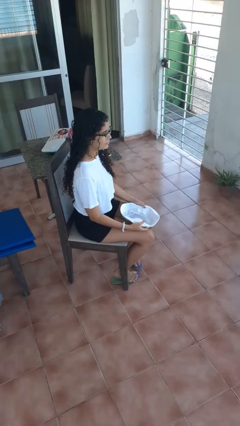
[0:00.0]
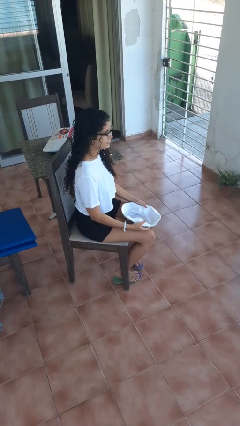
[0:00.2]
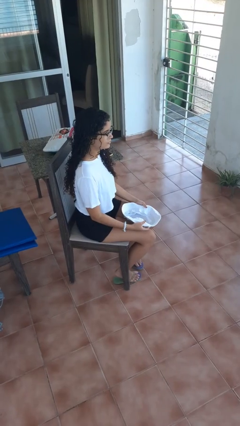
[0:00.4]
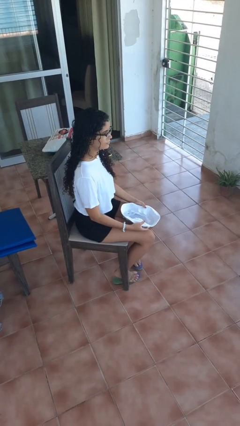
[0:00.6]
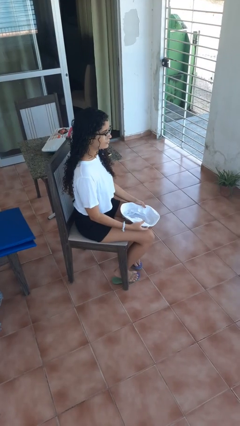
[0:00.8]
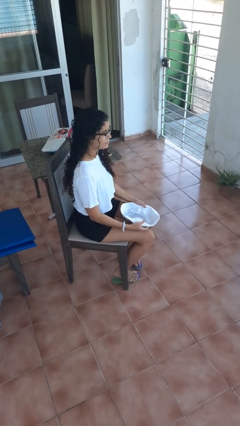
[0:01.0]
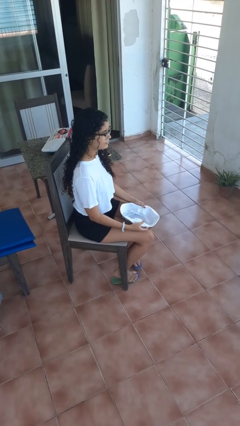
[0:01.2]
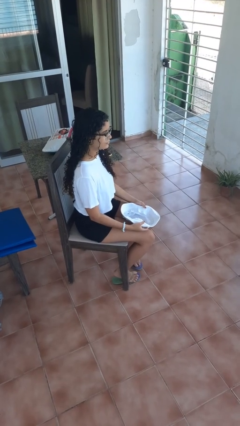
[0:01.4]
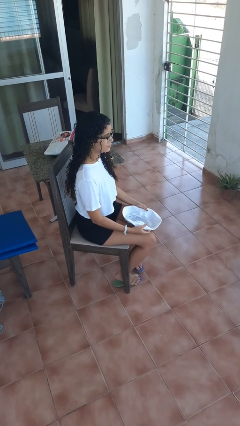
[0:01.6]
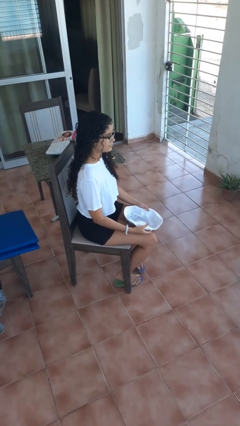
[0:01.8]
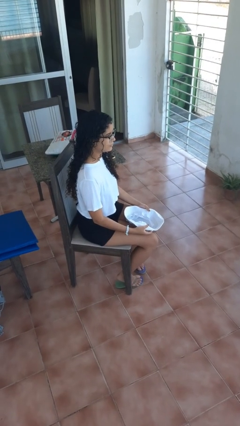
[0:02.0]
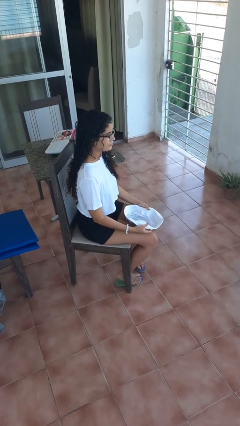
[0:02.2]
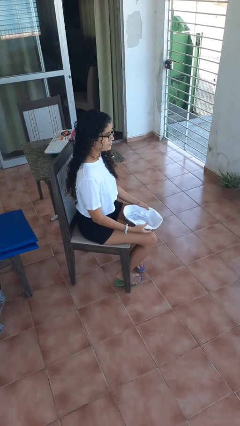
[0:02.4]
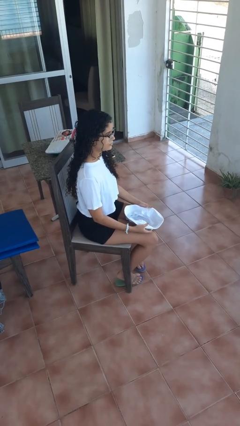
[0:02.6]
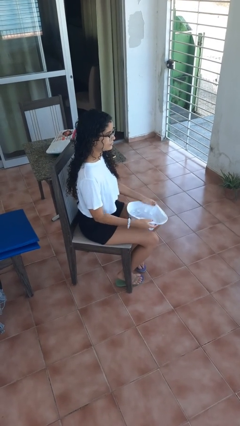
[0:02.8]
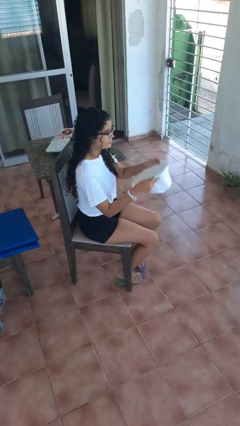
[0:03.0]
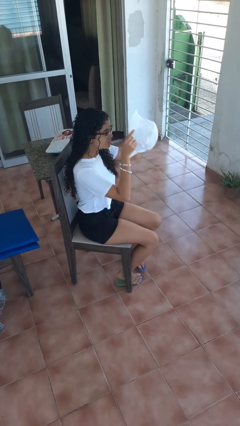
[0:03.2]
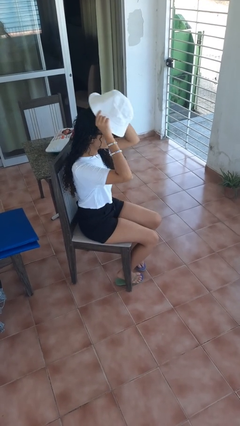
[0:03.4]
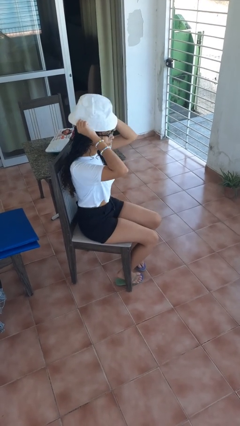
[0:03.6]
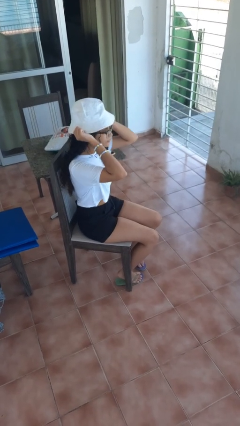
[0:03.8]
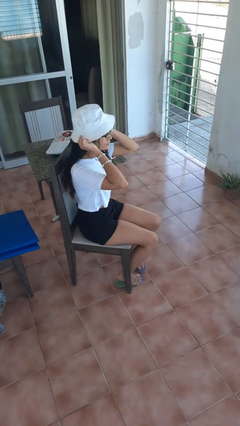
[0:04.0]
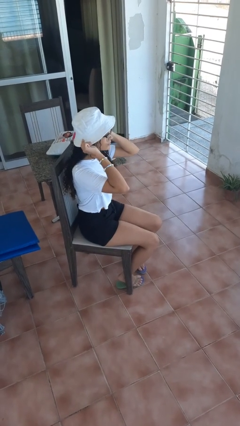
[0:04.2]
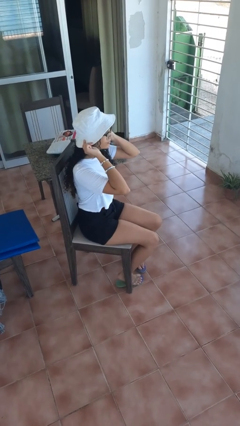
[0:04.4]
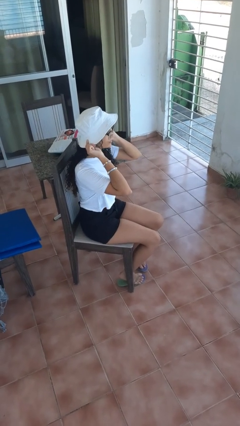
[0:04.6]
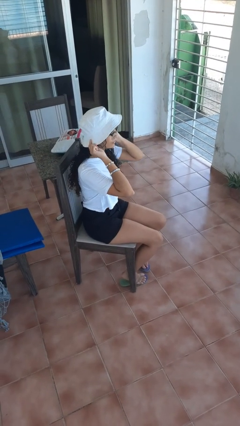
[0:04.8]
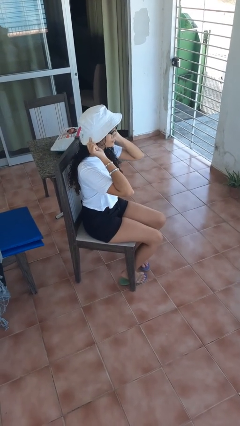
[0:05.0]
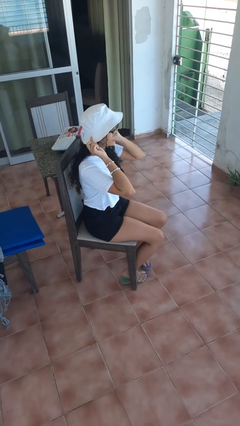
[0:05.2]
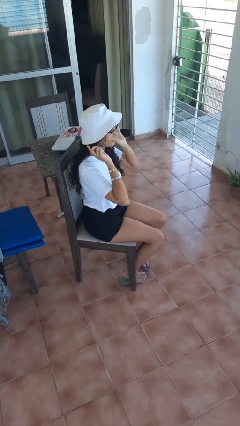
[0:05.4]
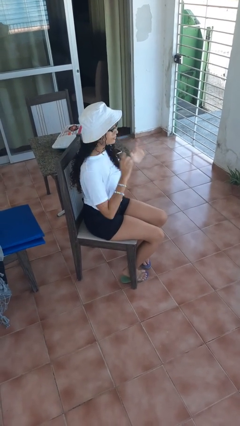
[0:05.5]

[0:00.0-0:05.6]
person puts on hat

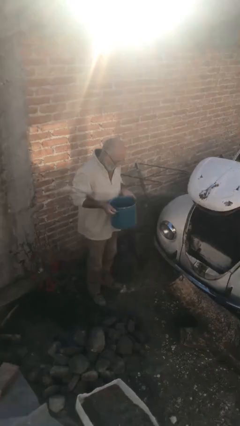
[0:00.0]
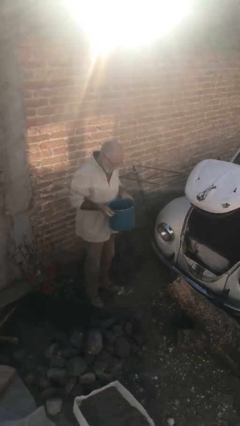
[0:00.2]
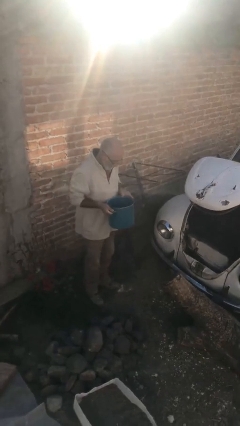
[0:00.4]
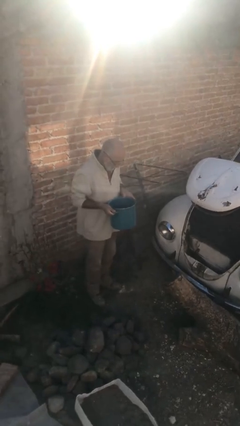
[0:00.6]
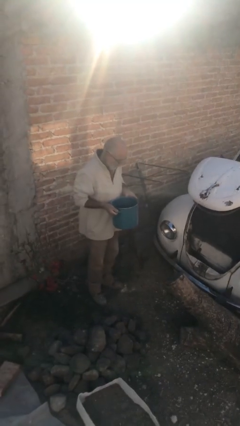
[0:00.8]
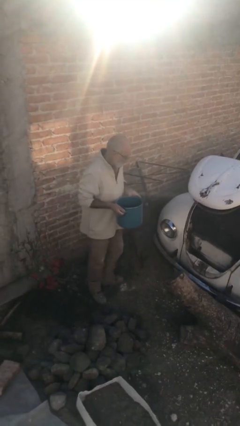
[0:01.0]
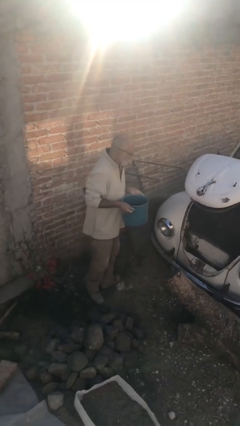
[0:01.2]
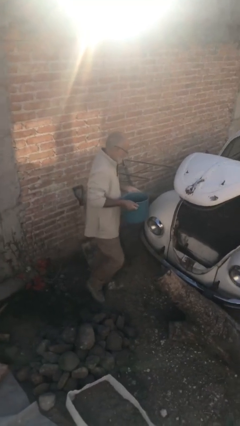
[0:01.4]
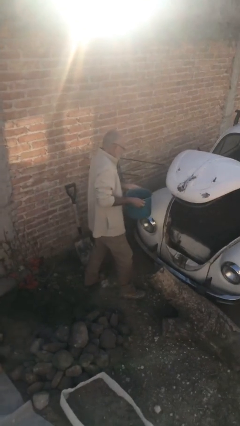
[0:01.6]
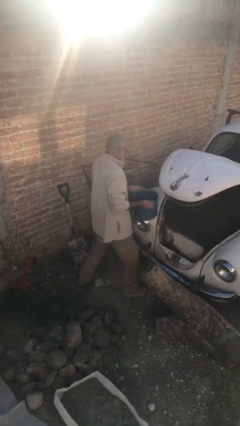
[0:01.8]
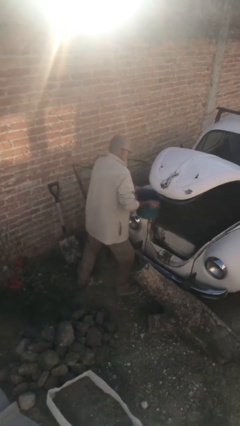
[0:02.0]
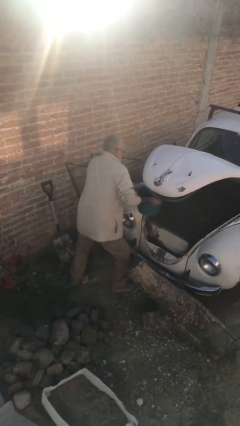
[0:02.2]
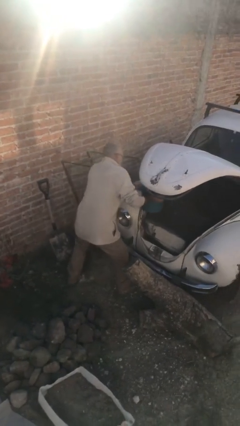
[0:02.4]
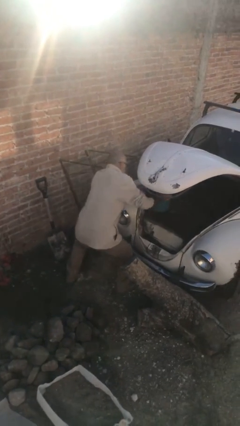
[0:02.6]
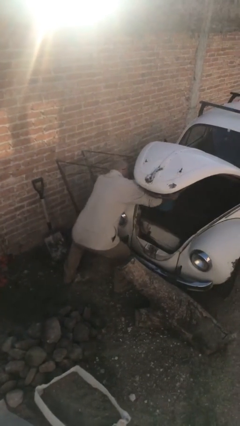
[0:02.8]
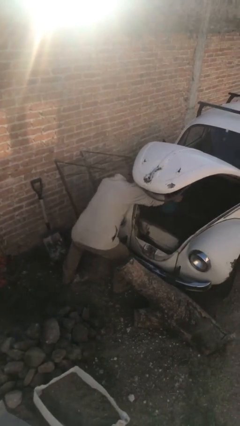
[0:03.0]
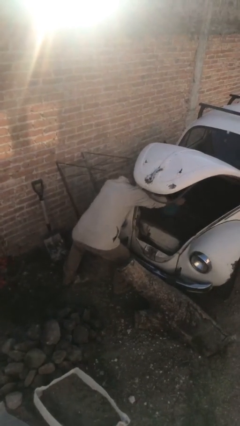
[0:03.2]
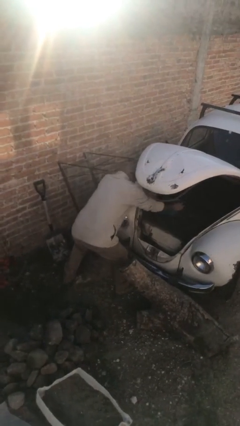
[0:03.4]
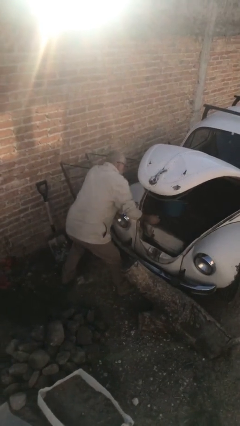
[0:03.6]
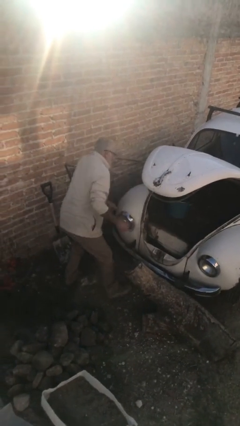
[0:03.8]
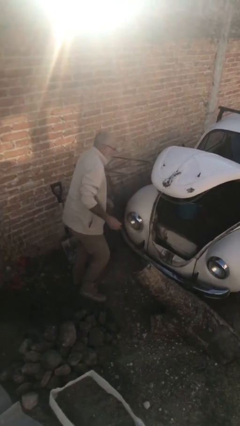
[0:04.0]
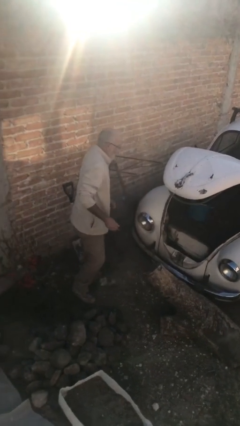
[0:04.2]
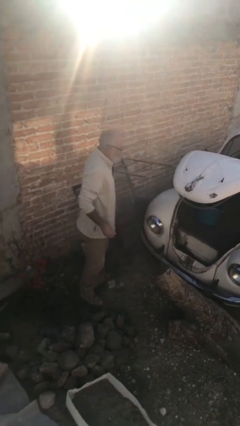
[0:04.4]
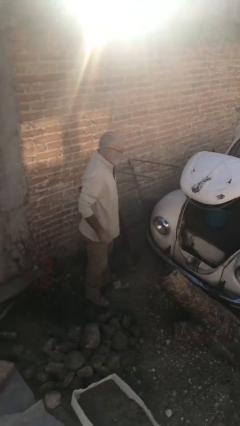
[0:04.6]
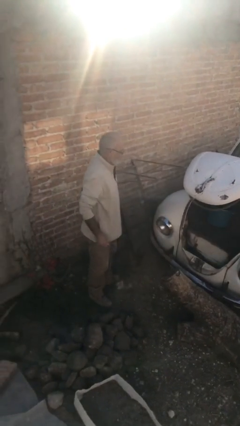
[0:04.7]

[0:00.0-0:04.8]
person loads car

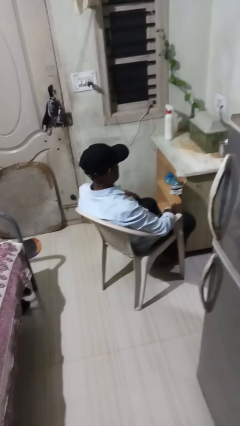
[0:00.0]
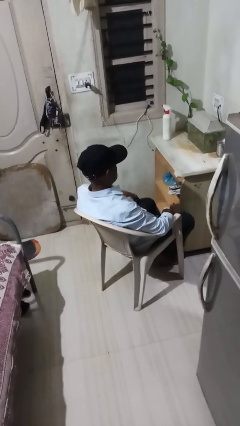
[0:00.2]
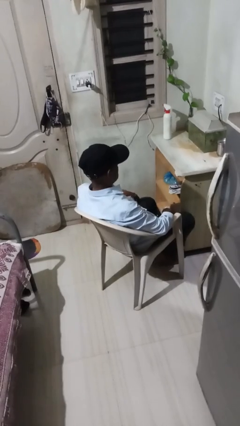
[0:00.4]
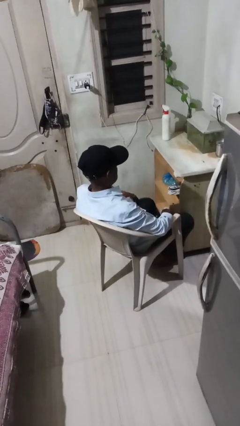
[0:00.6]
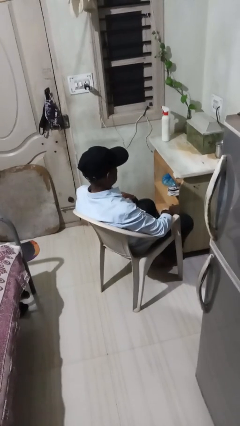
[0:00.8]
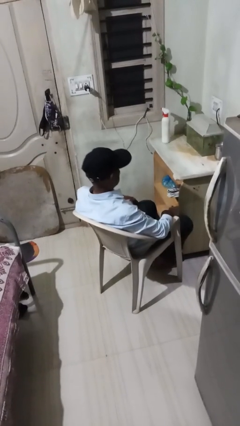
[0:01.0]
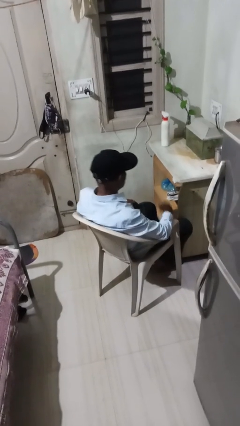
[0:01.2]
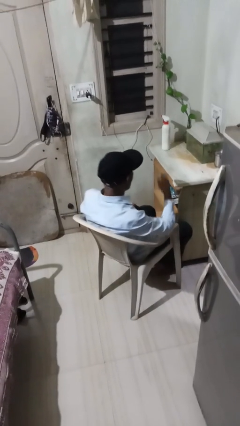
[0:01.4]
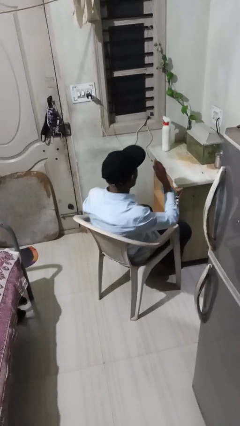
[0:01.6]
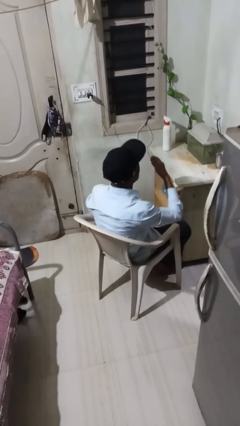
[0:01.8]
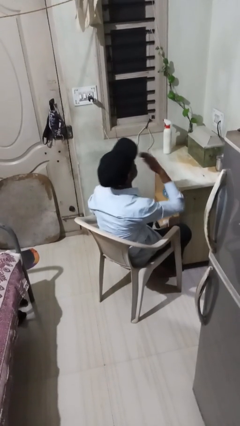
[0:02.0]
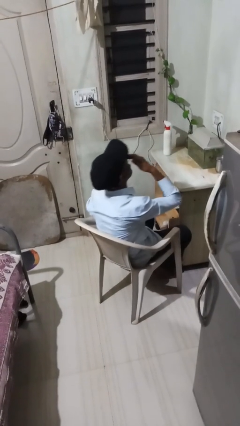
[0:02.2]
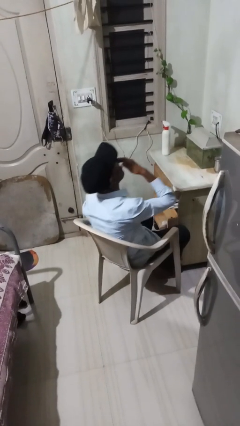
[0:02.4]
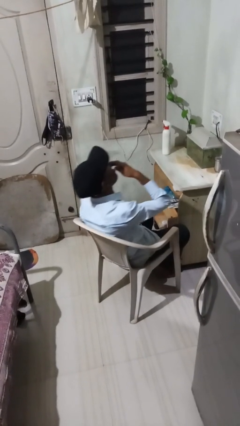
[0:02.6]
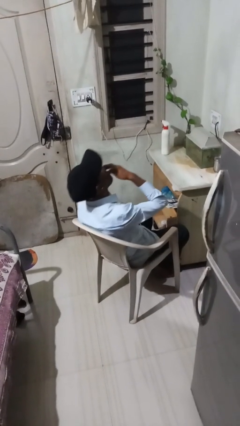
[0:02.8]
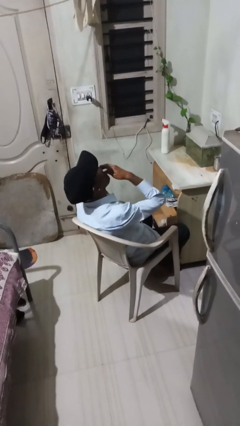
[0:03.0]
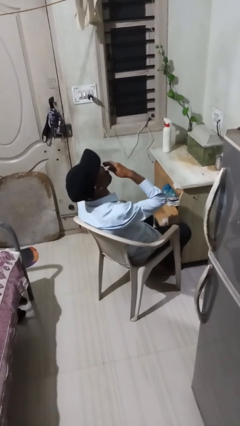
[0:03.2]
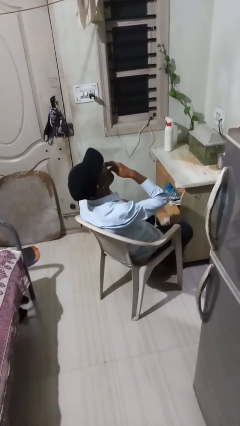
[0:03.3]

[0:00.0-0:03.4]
person yawns

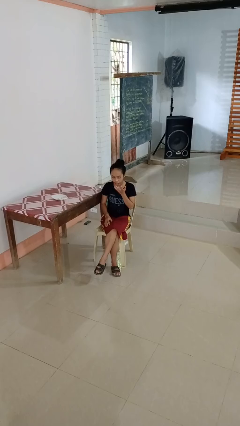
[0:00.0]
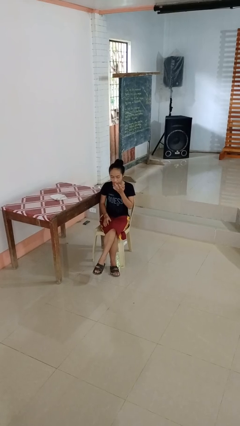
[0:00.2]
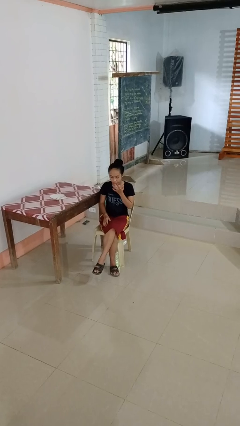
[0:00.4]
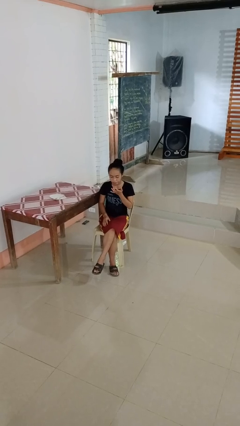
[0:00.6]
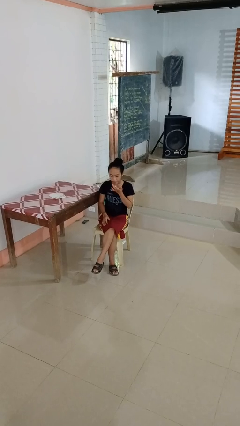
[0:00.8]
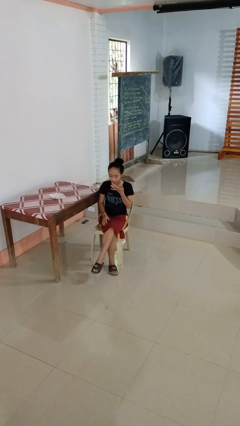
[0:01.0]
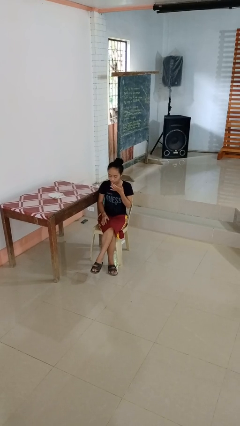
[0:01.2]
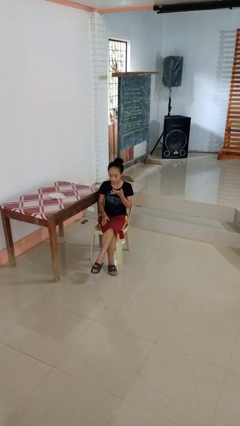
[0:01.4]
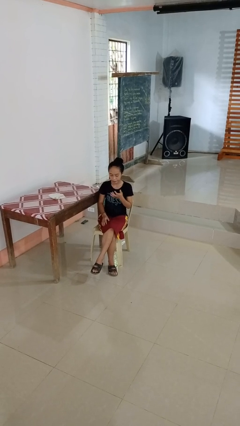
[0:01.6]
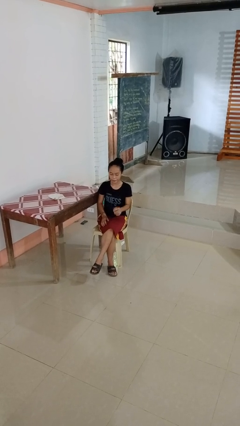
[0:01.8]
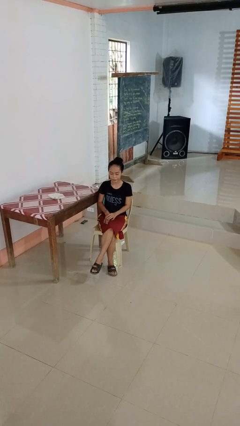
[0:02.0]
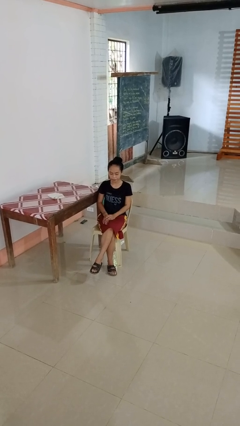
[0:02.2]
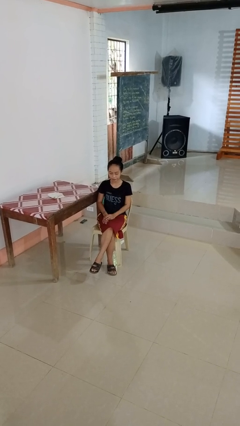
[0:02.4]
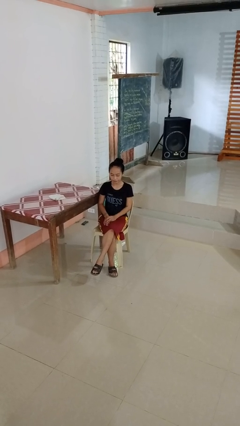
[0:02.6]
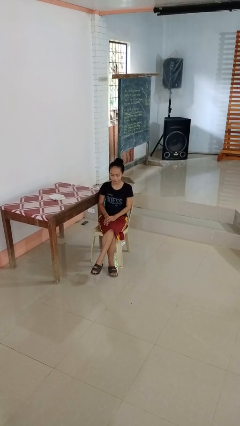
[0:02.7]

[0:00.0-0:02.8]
person licks fingers

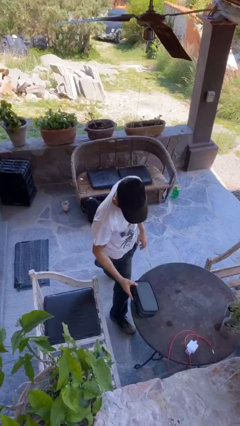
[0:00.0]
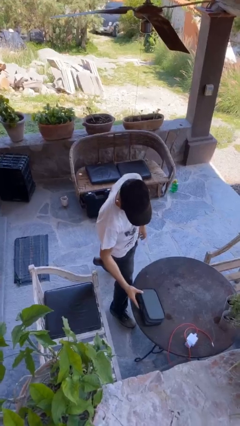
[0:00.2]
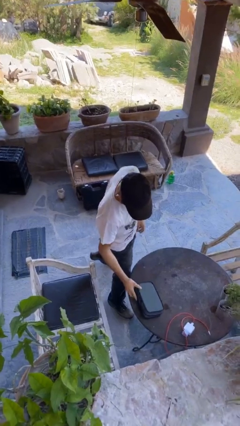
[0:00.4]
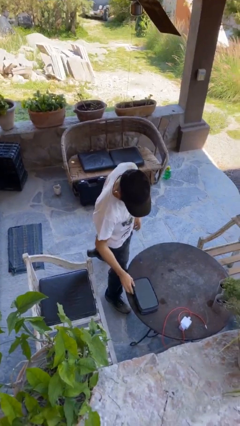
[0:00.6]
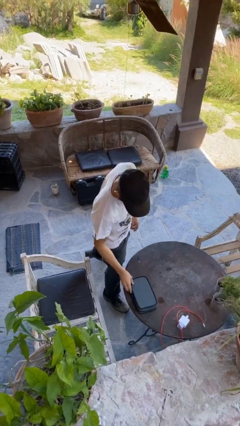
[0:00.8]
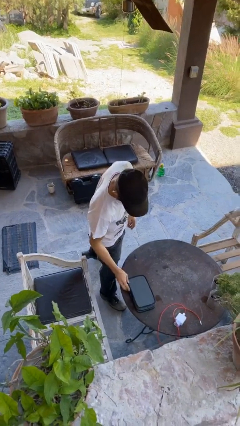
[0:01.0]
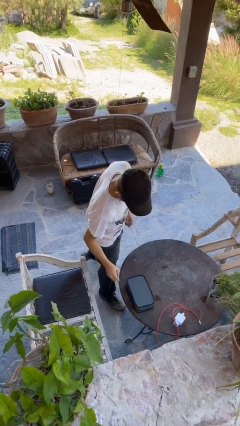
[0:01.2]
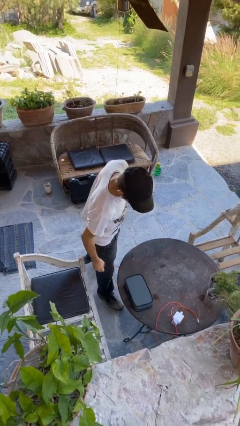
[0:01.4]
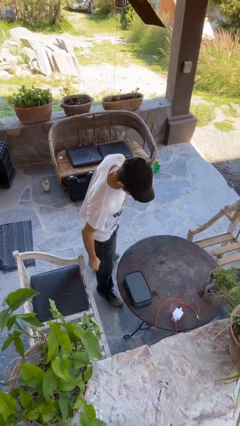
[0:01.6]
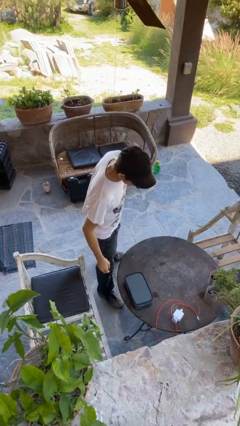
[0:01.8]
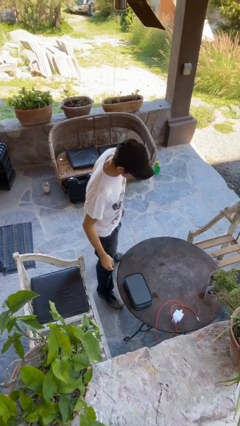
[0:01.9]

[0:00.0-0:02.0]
person puts down object on table
